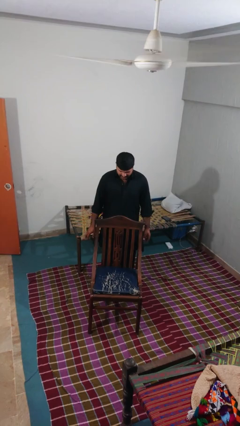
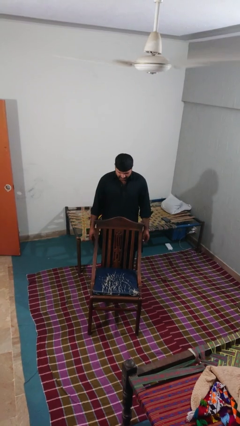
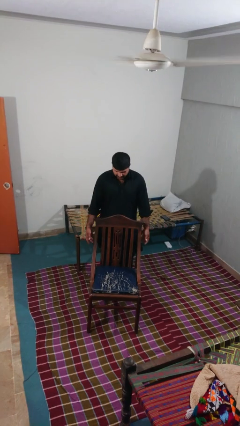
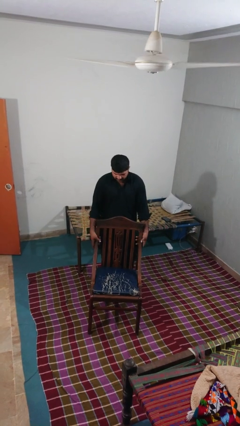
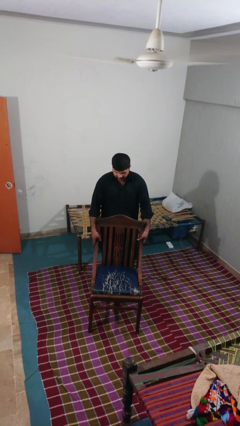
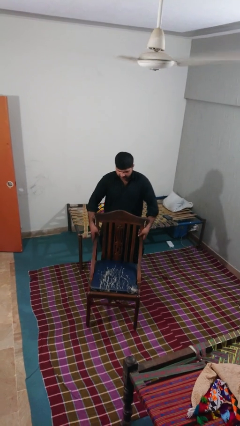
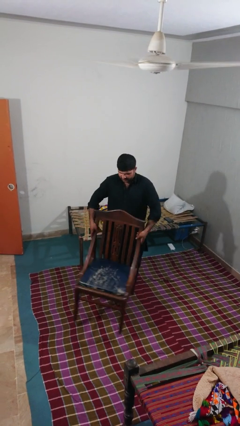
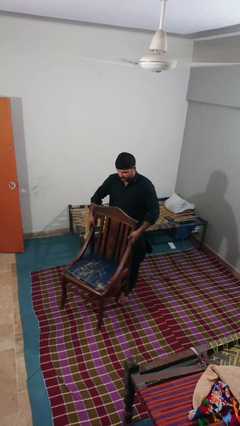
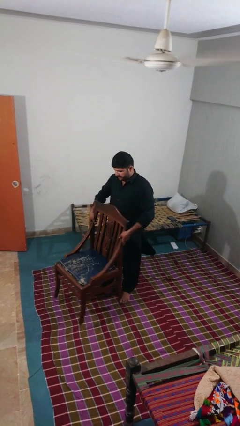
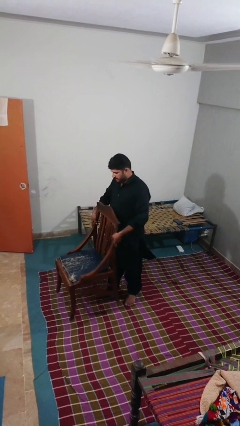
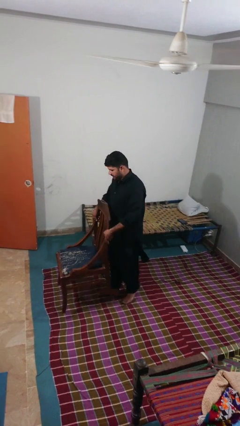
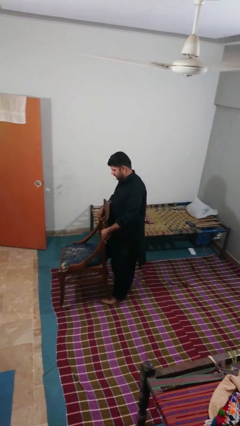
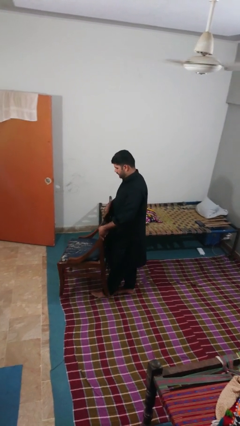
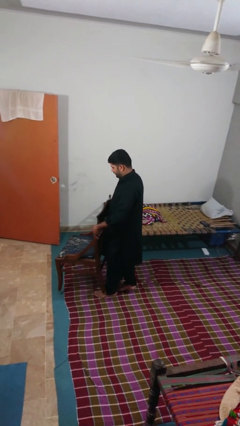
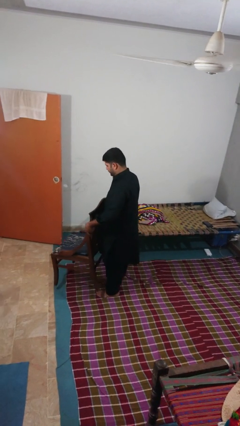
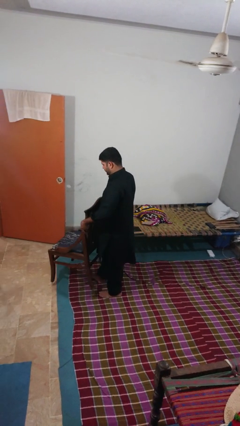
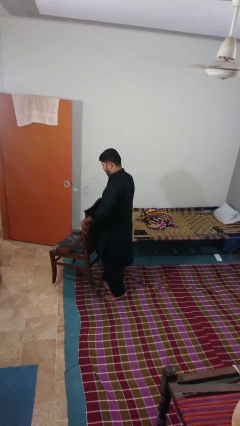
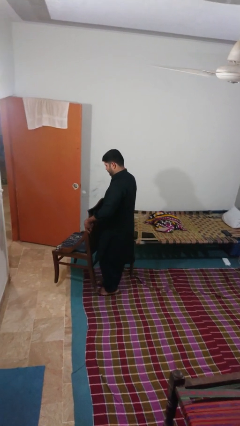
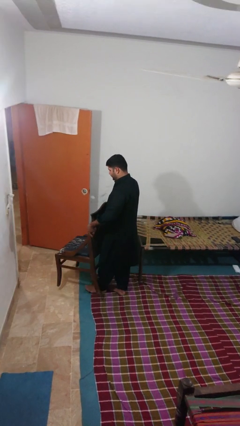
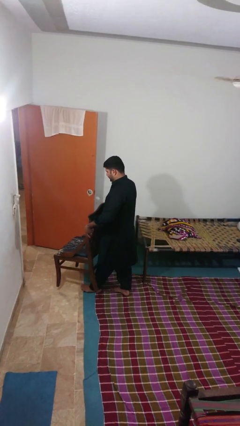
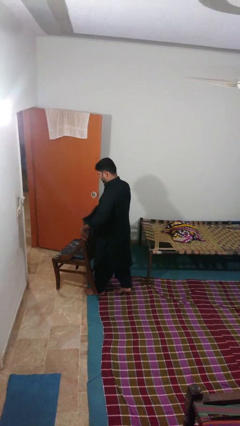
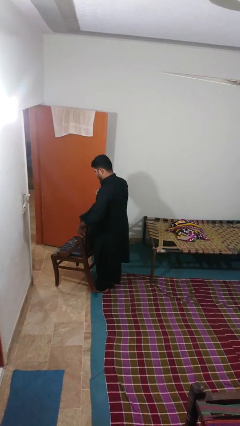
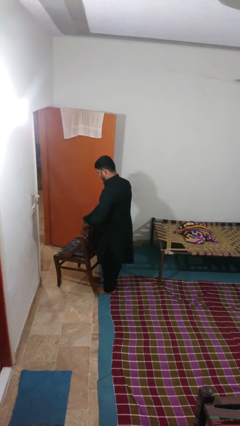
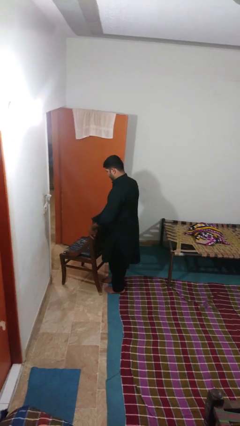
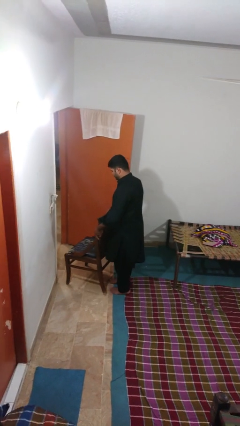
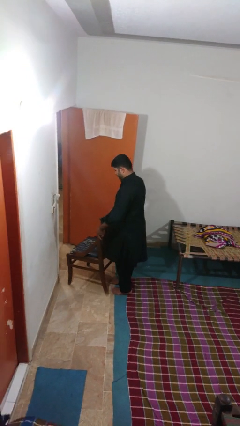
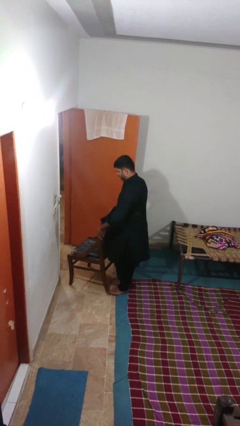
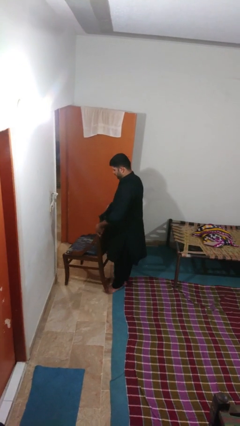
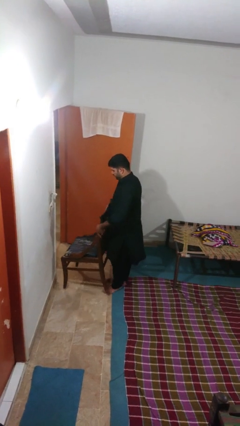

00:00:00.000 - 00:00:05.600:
person carries furniture

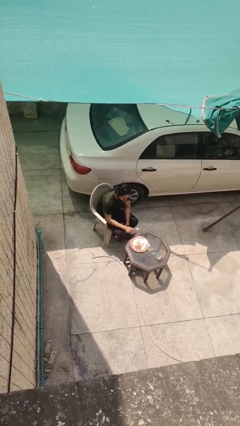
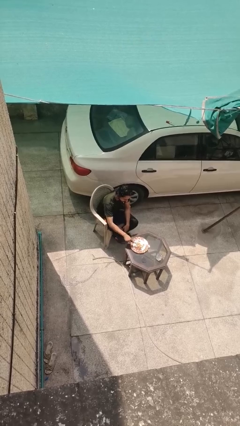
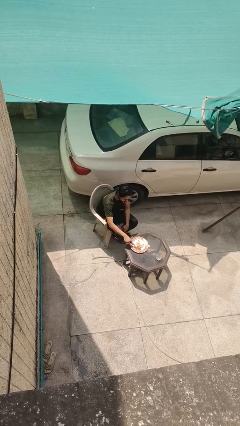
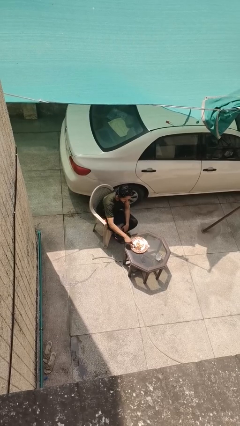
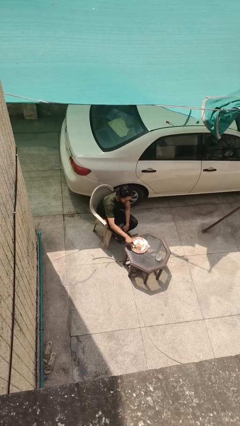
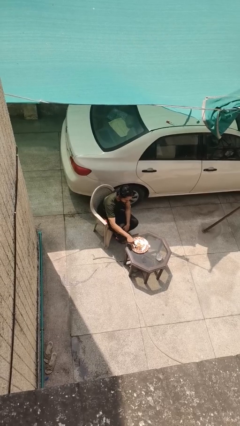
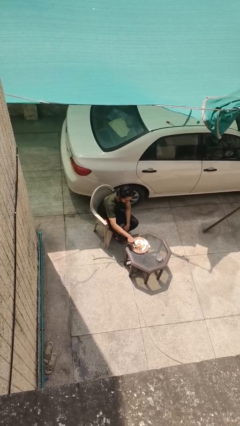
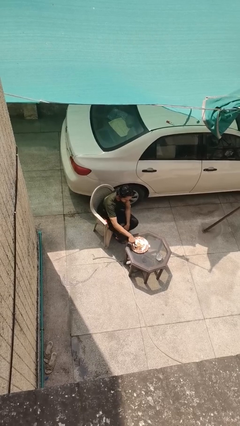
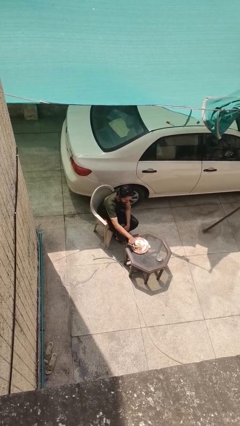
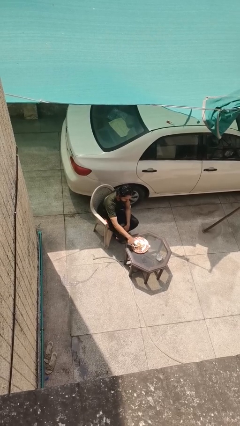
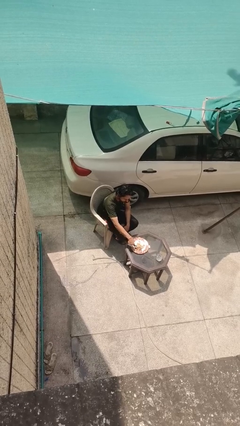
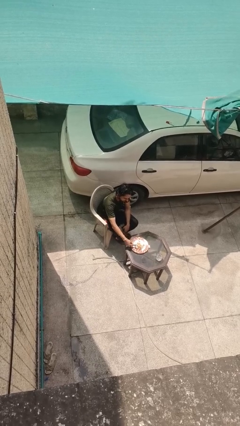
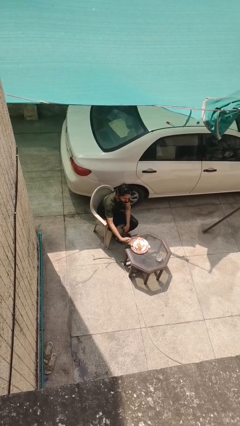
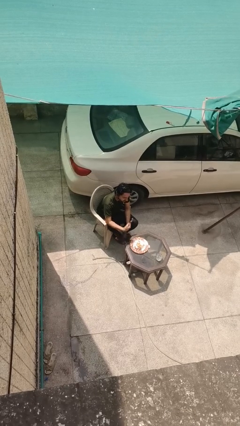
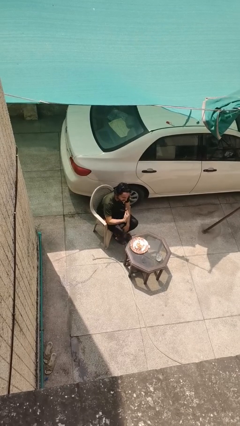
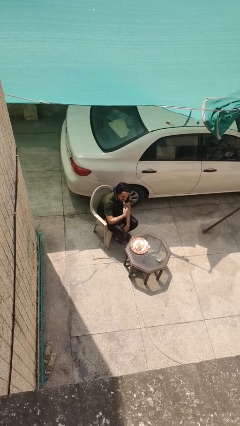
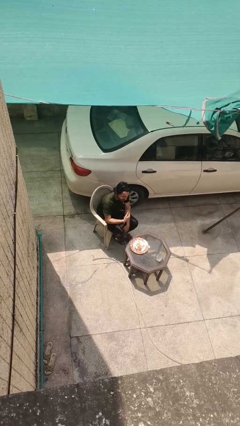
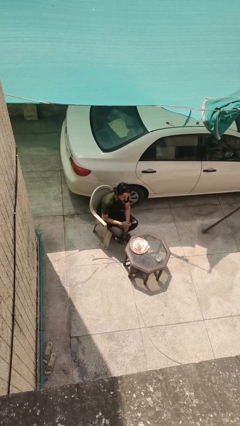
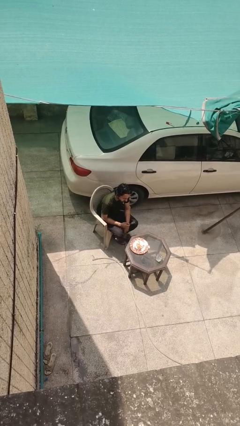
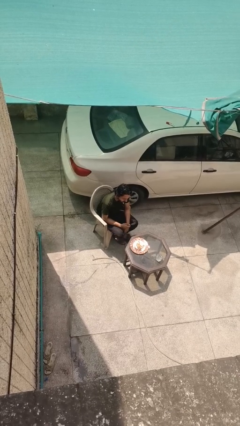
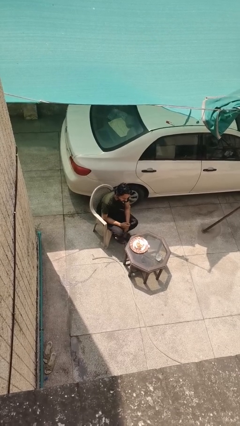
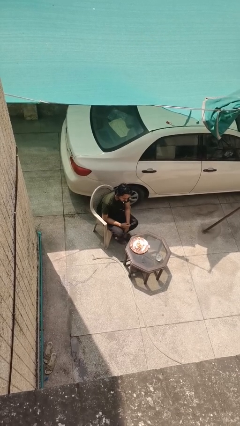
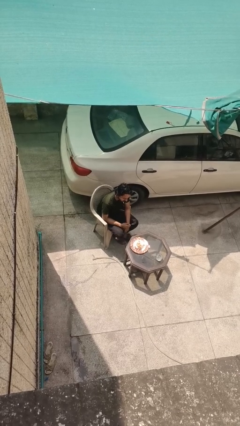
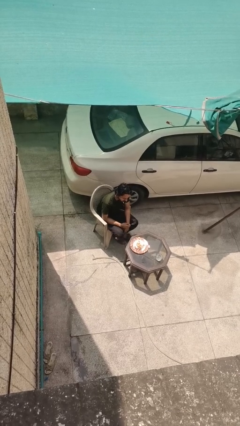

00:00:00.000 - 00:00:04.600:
person eats with utensil

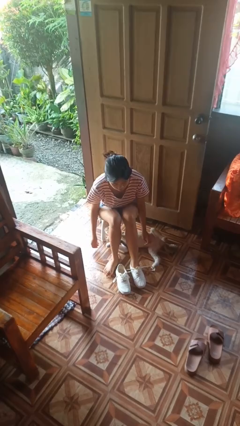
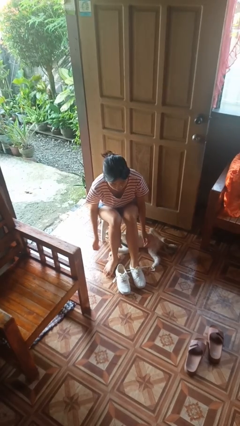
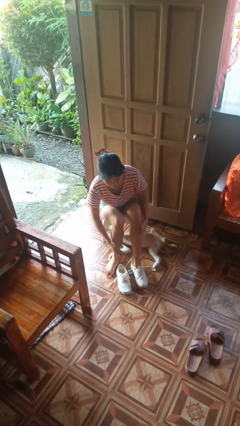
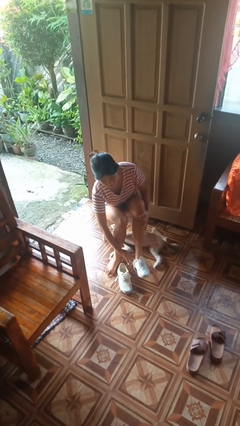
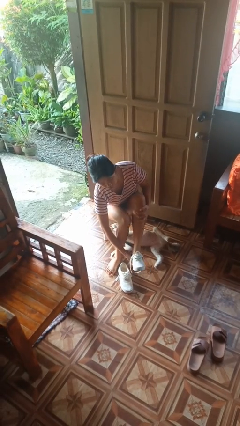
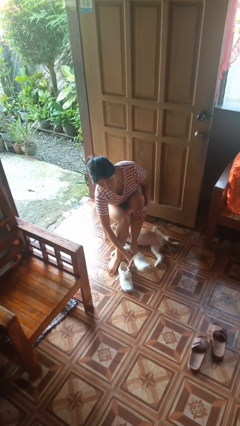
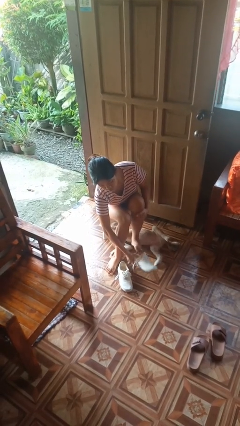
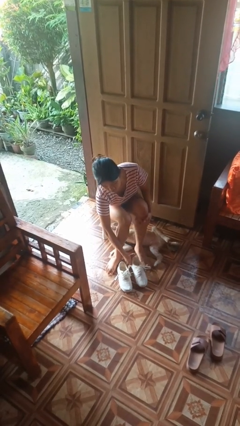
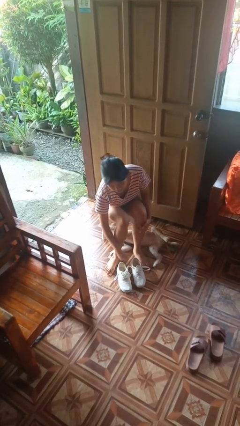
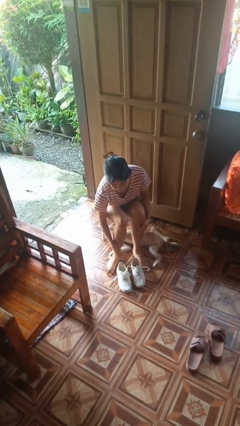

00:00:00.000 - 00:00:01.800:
person takes off shoes

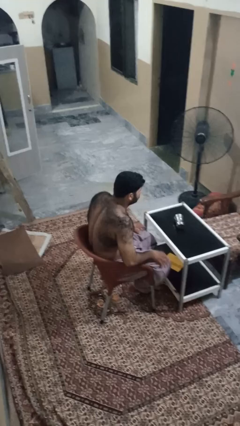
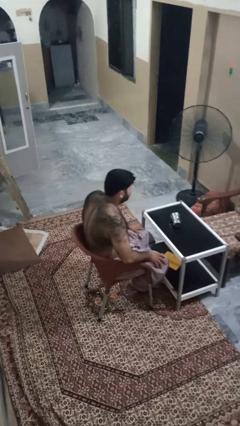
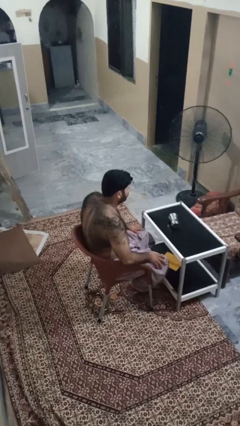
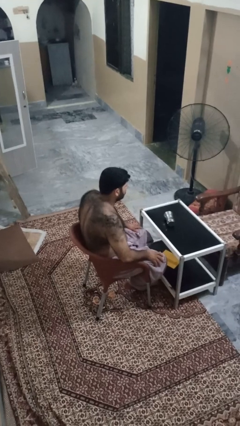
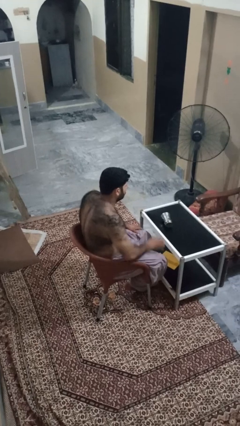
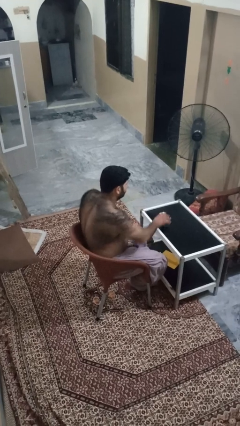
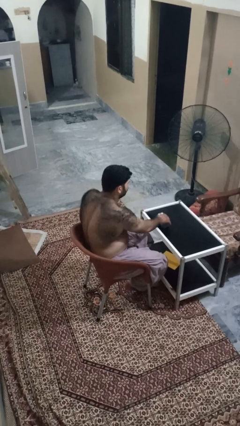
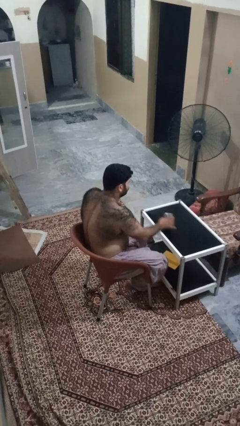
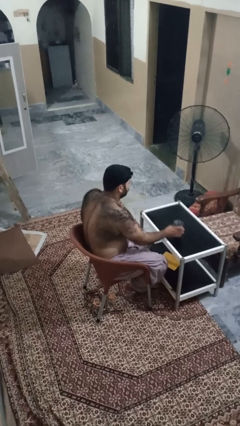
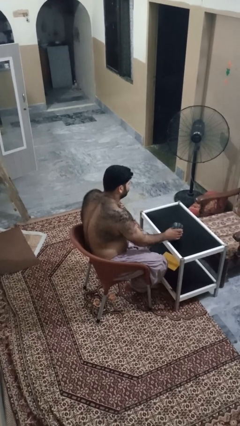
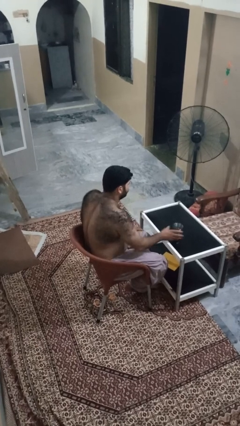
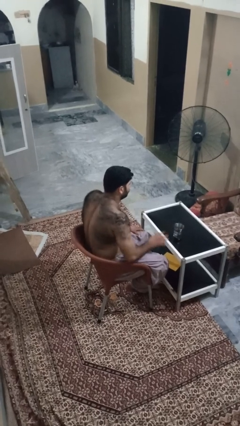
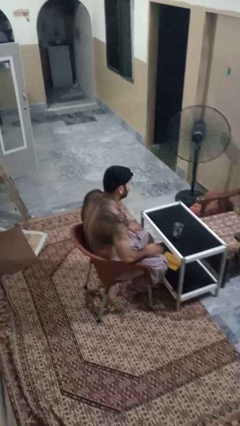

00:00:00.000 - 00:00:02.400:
person sets upright glass

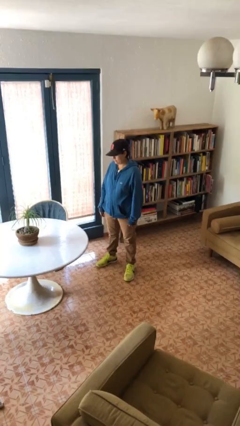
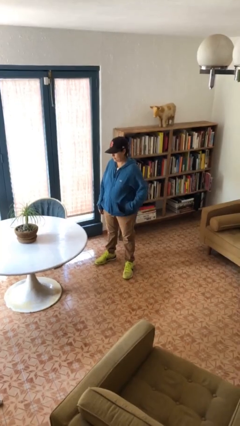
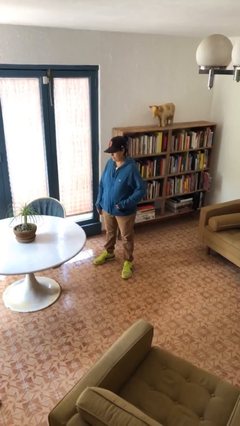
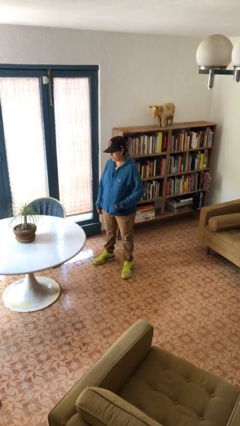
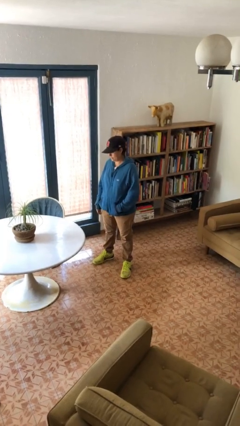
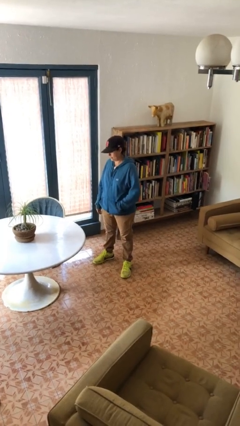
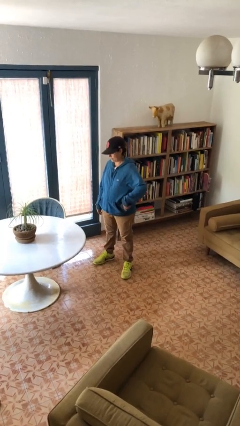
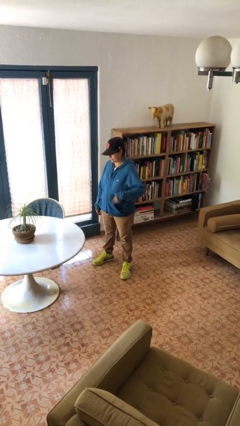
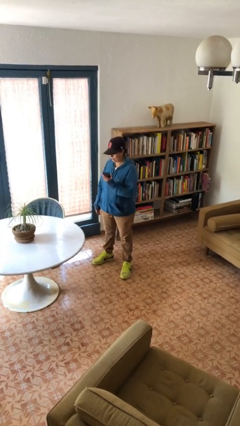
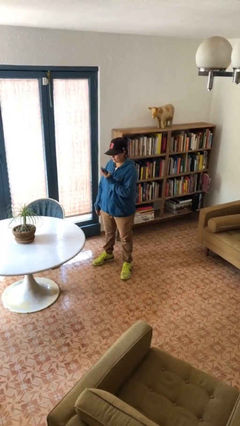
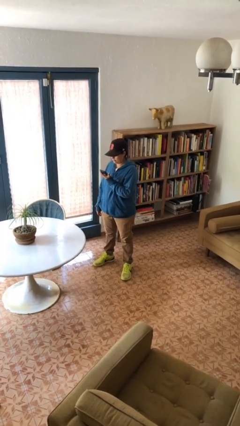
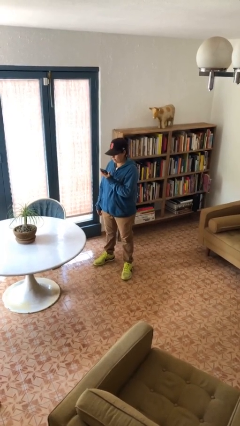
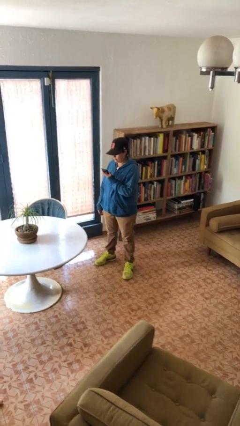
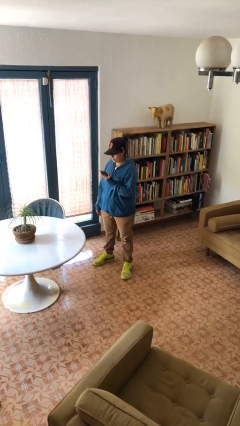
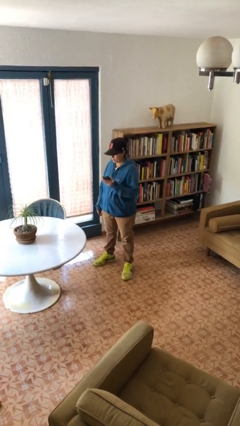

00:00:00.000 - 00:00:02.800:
person takes phone from pocket

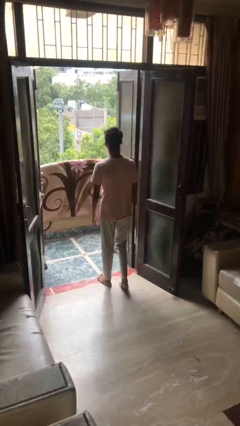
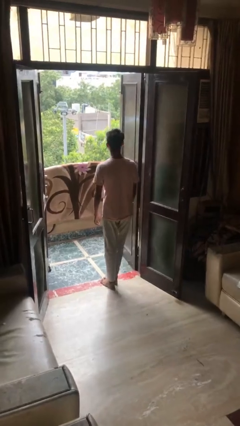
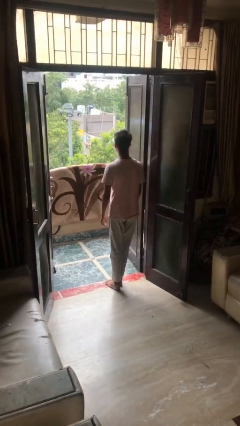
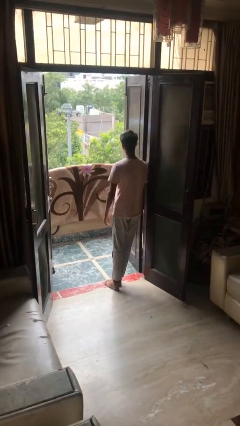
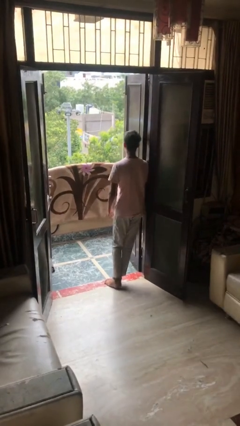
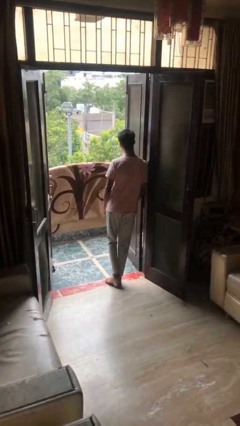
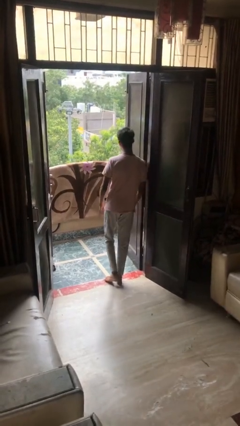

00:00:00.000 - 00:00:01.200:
person bumps into wall
